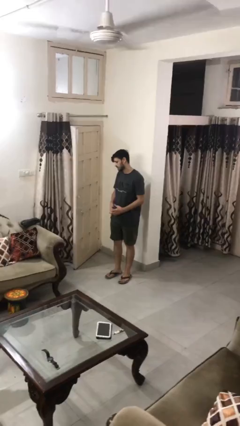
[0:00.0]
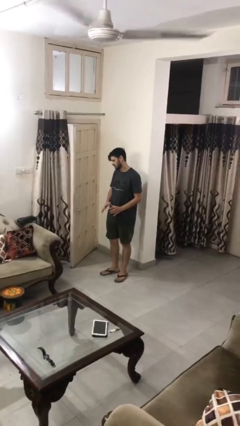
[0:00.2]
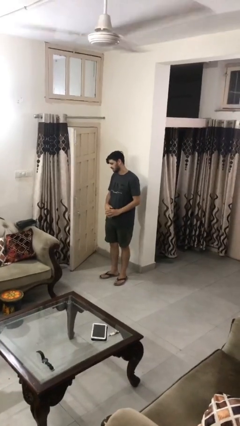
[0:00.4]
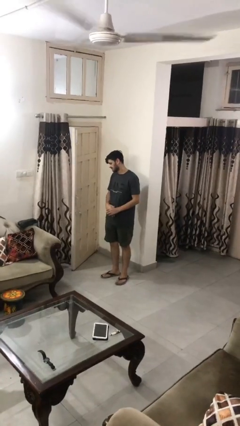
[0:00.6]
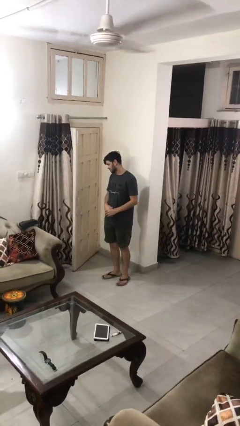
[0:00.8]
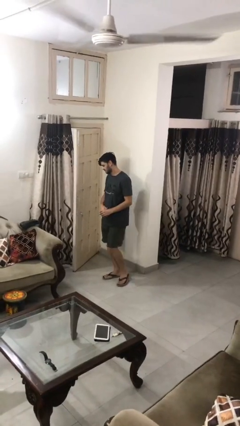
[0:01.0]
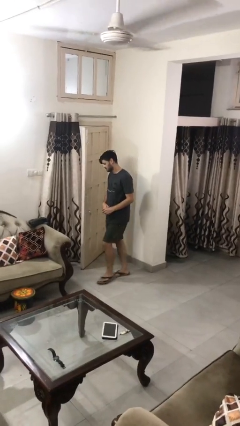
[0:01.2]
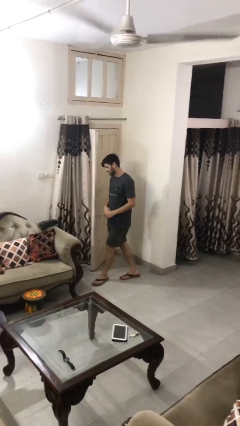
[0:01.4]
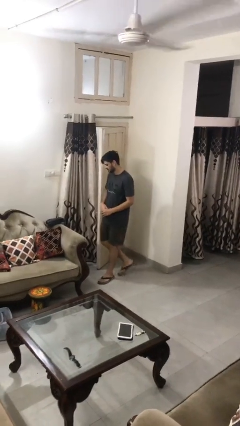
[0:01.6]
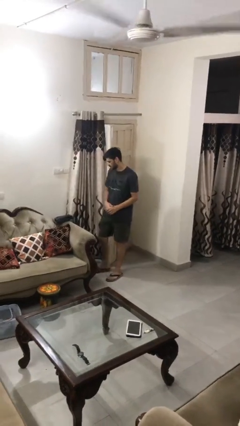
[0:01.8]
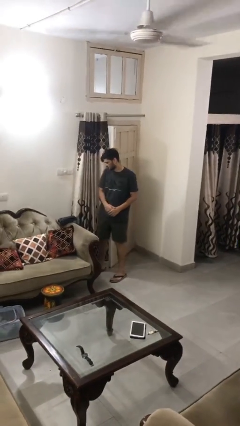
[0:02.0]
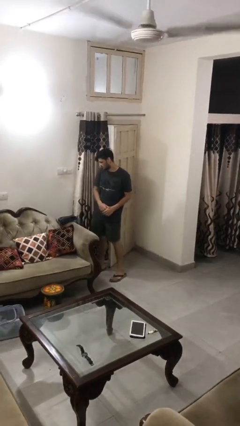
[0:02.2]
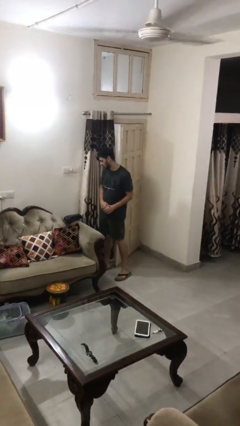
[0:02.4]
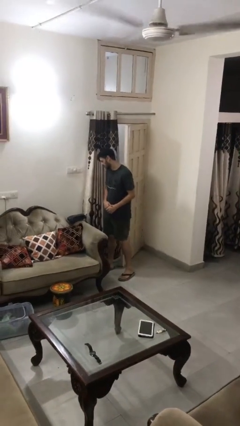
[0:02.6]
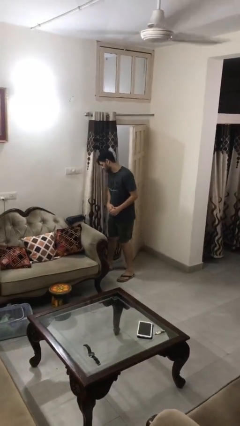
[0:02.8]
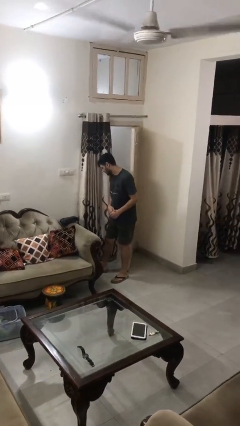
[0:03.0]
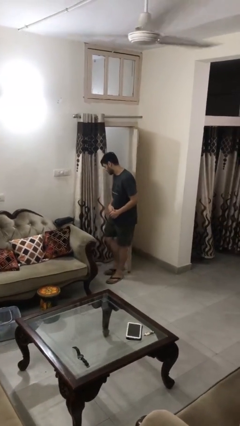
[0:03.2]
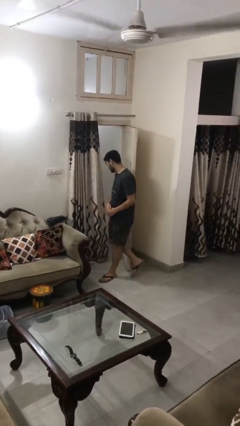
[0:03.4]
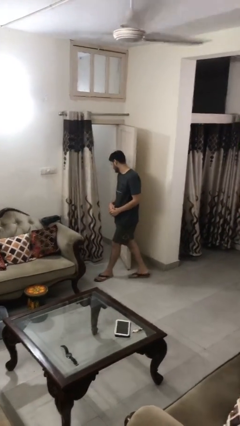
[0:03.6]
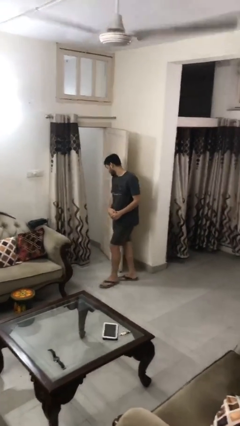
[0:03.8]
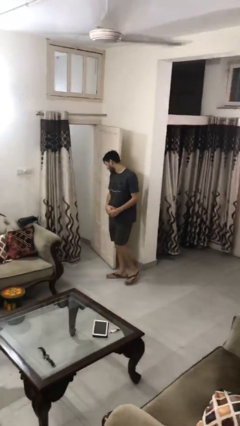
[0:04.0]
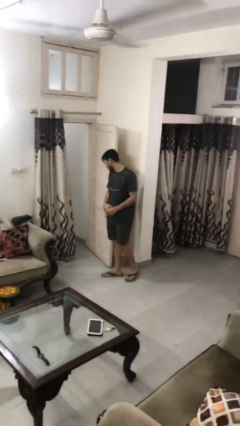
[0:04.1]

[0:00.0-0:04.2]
person opens facility door

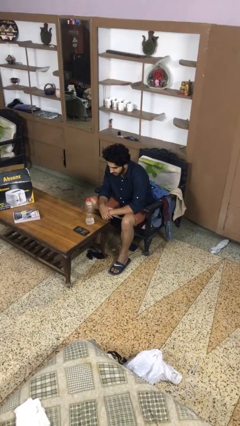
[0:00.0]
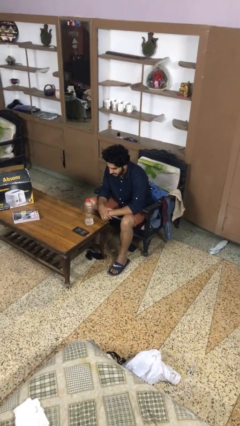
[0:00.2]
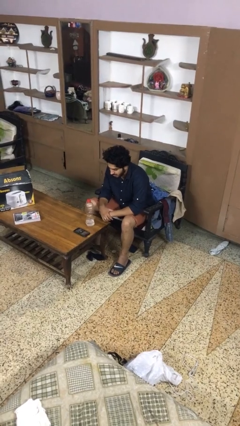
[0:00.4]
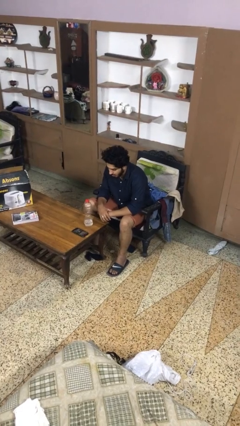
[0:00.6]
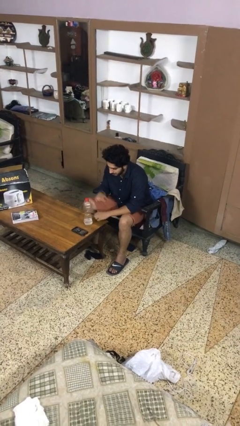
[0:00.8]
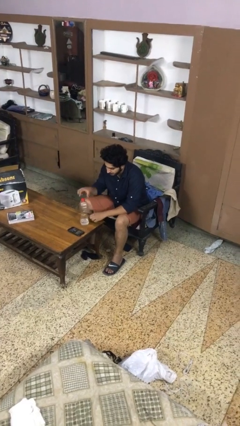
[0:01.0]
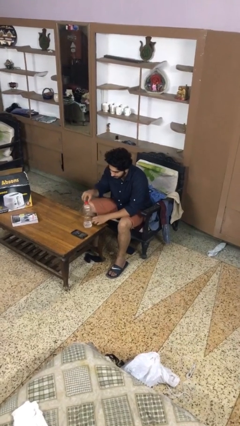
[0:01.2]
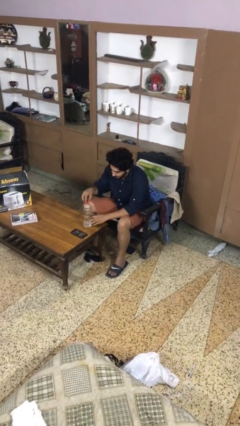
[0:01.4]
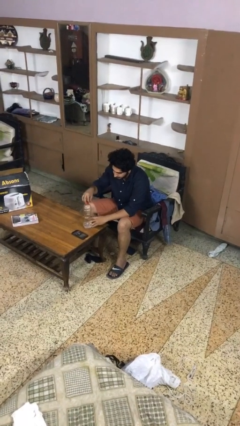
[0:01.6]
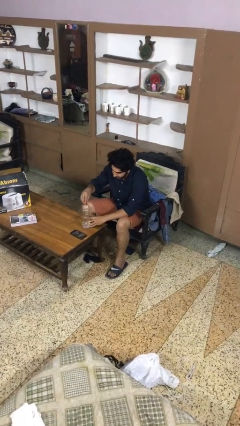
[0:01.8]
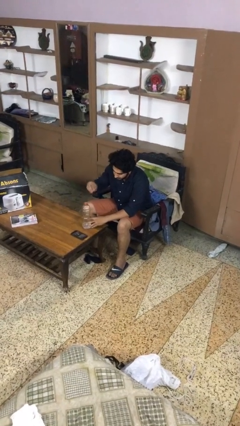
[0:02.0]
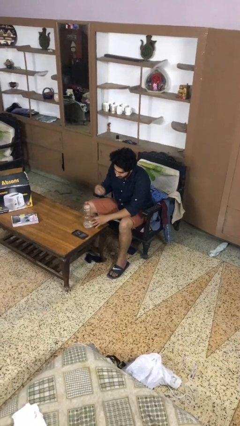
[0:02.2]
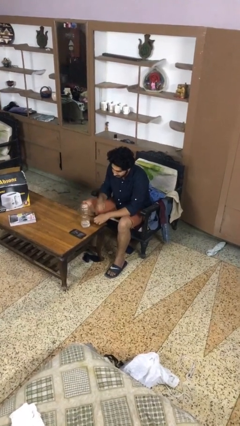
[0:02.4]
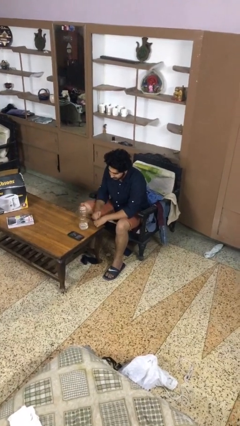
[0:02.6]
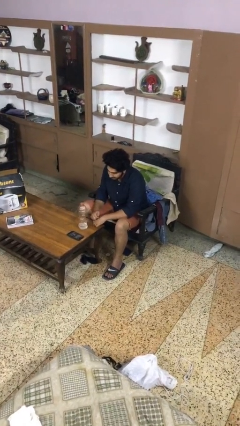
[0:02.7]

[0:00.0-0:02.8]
person unscrews lid from bottle

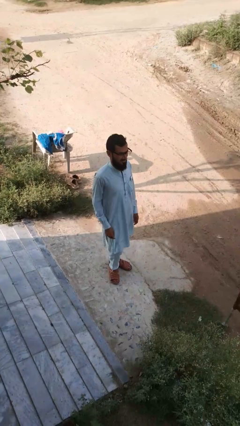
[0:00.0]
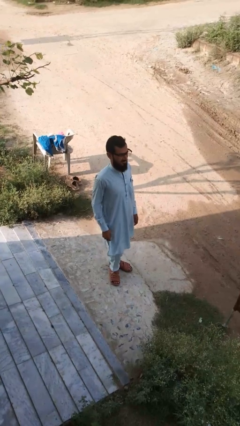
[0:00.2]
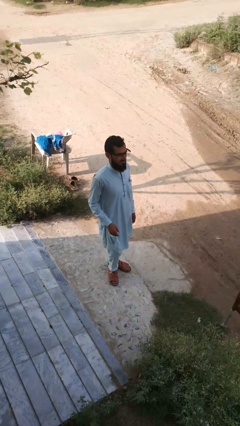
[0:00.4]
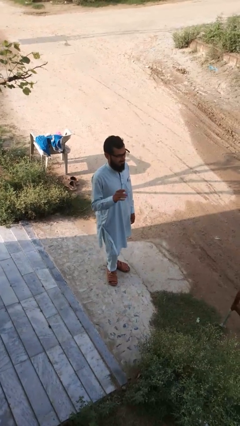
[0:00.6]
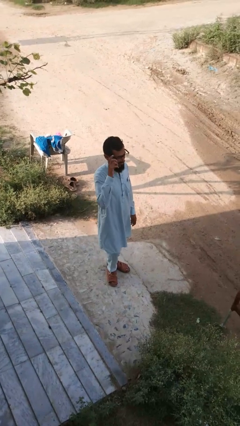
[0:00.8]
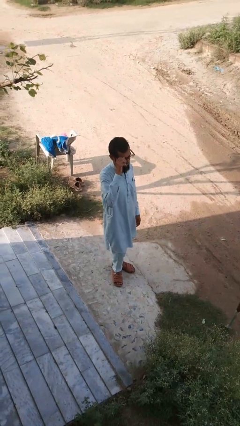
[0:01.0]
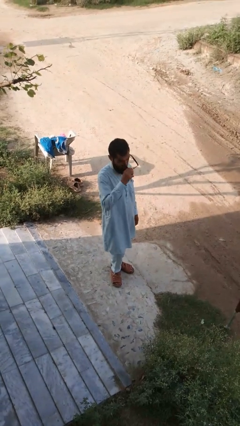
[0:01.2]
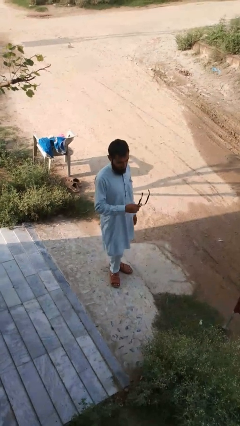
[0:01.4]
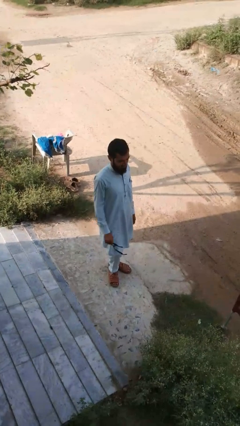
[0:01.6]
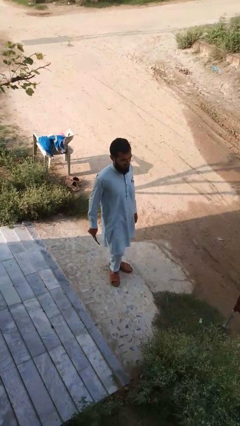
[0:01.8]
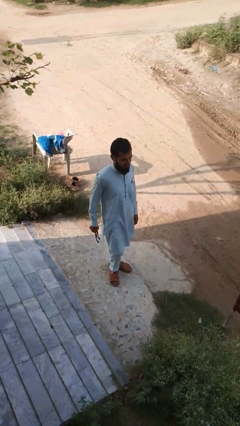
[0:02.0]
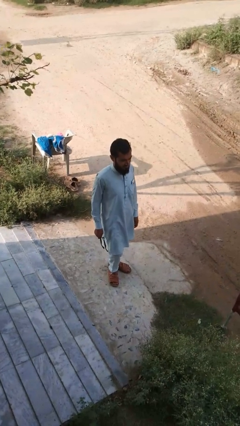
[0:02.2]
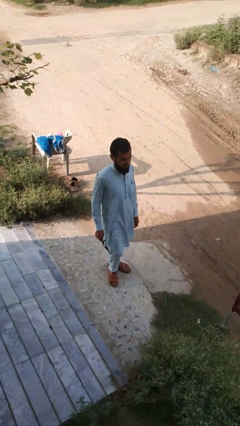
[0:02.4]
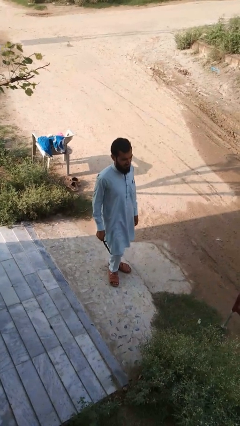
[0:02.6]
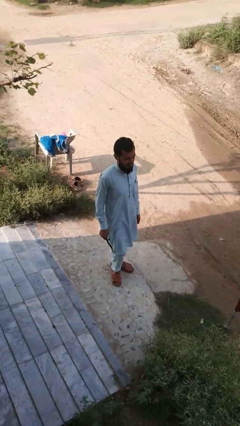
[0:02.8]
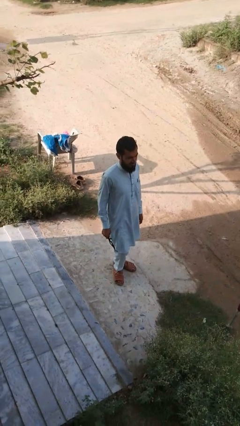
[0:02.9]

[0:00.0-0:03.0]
person takes off glasses

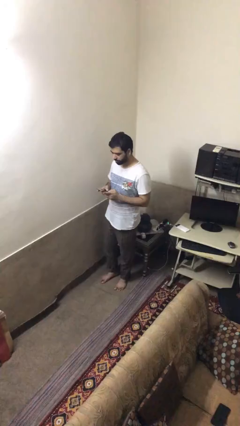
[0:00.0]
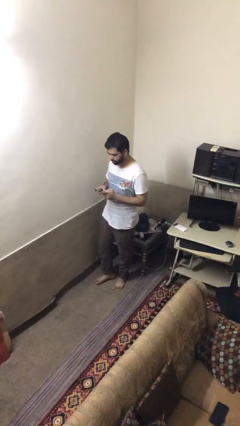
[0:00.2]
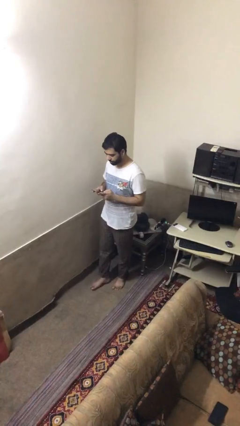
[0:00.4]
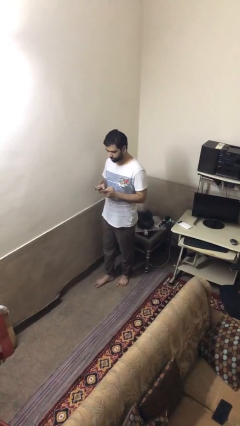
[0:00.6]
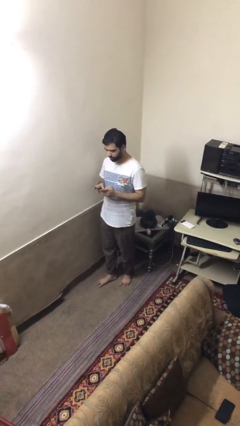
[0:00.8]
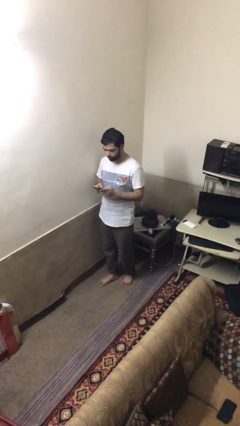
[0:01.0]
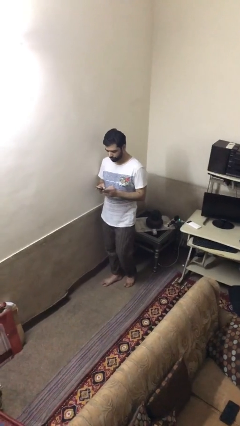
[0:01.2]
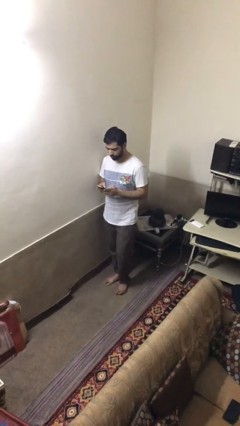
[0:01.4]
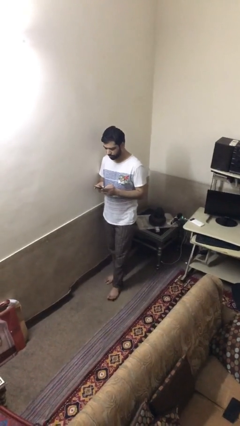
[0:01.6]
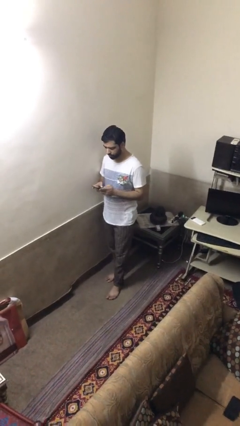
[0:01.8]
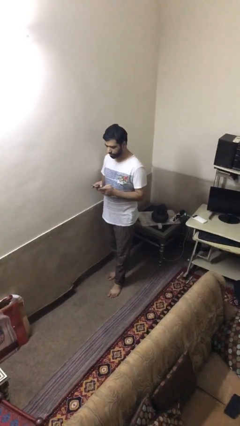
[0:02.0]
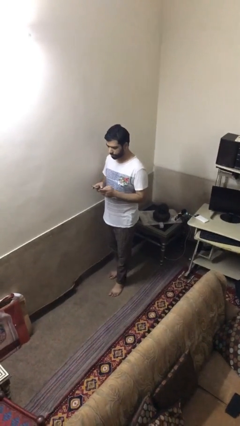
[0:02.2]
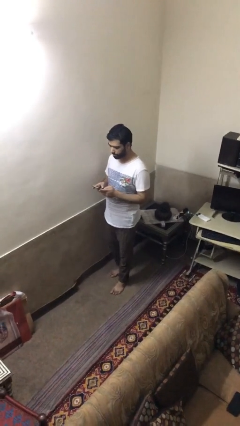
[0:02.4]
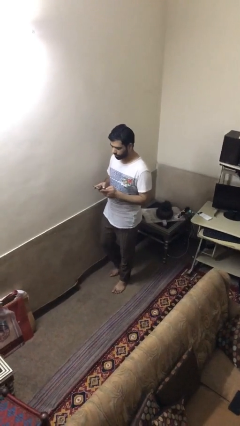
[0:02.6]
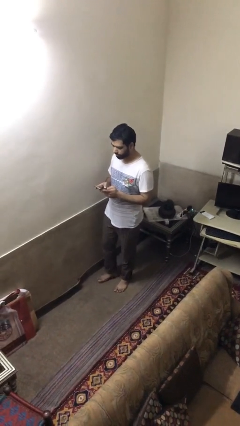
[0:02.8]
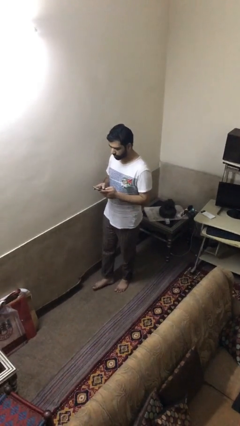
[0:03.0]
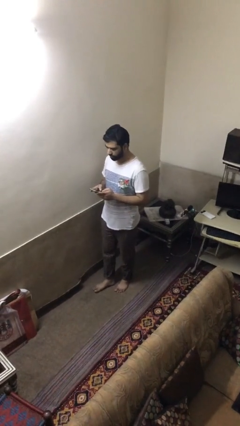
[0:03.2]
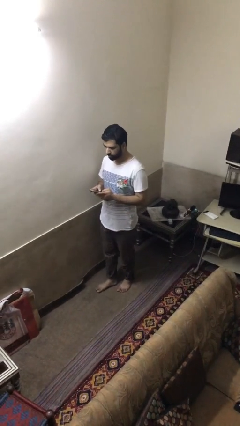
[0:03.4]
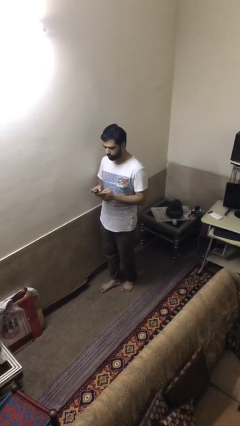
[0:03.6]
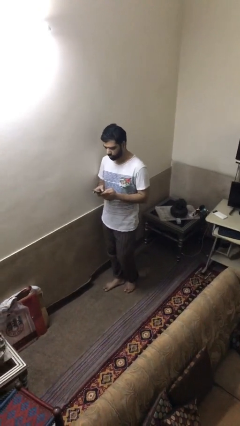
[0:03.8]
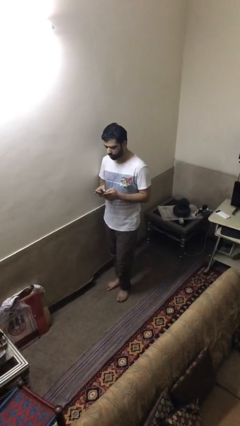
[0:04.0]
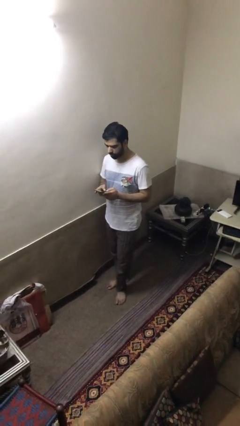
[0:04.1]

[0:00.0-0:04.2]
person texts on phone

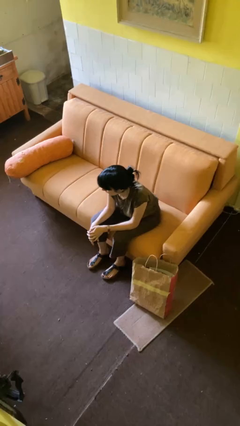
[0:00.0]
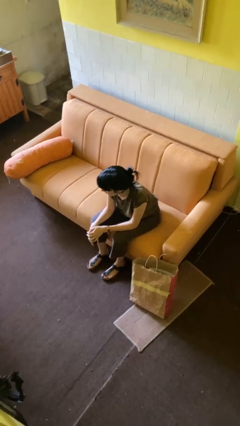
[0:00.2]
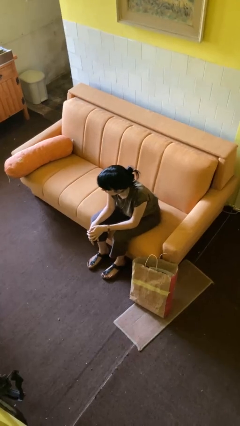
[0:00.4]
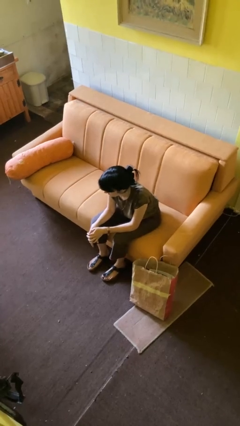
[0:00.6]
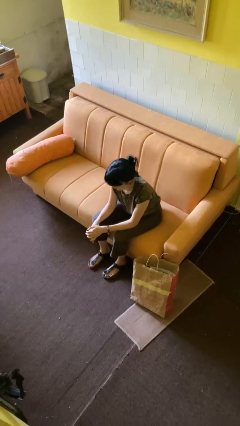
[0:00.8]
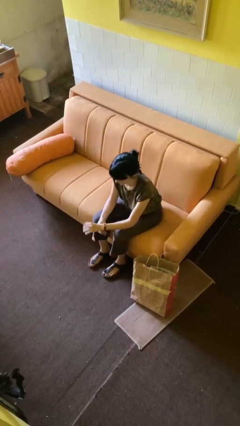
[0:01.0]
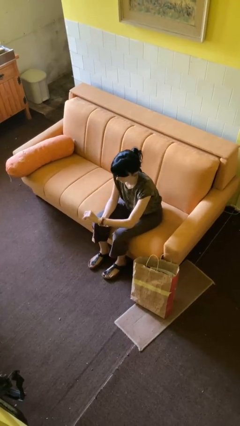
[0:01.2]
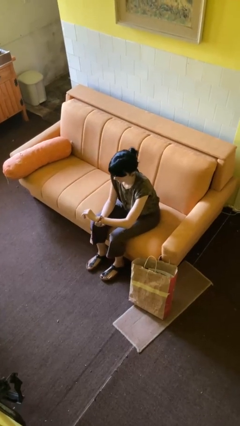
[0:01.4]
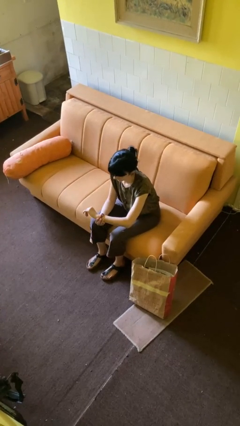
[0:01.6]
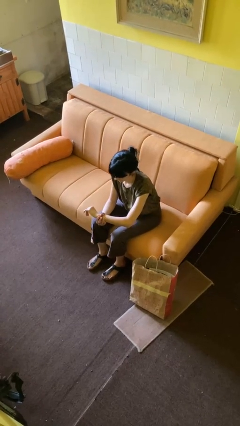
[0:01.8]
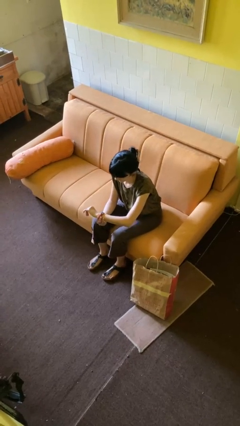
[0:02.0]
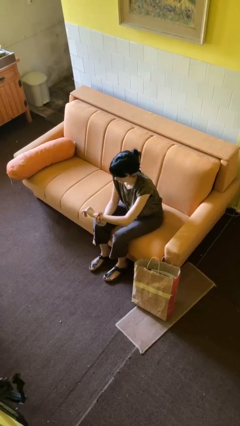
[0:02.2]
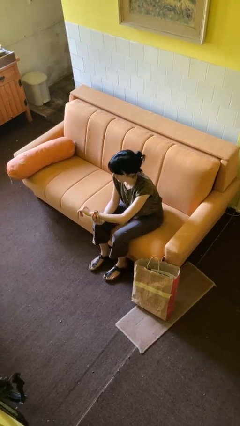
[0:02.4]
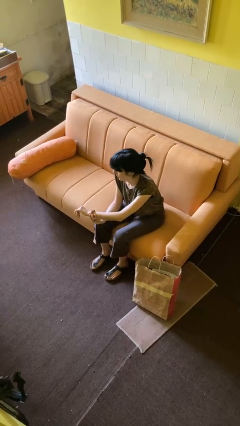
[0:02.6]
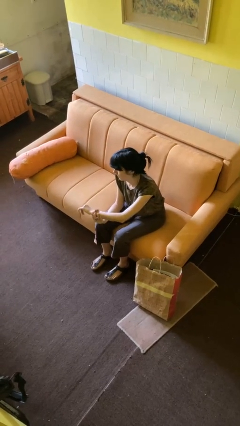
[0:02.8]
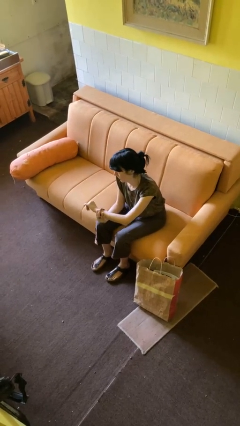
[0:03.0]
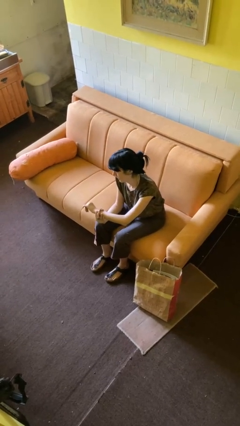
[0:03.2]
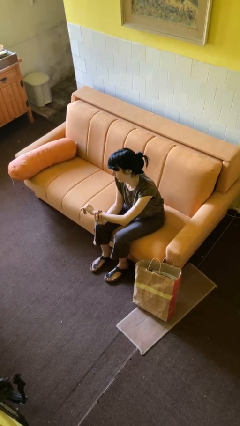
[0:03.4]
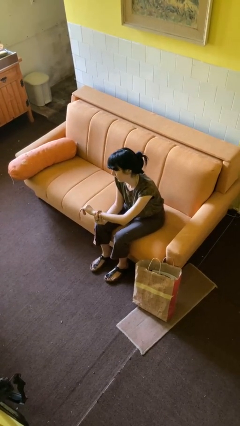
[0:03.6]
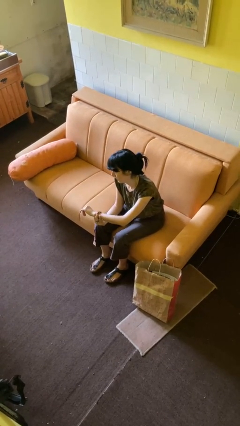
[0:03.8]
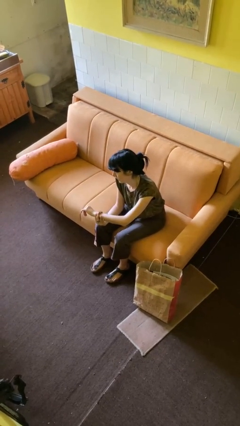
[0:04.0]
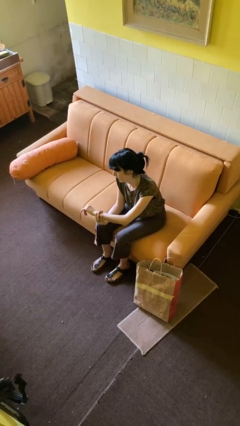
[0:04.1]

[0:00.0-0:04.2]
person looks at wristwatch
